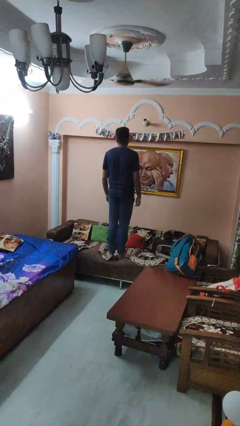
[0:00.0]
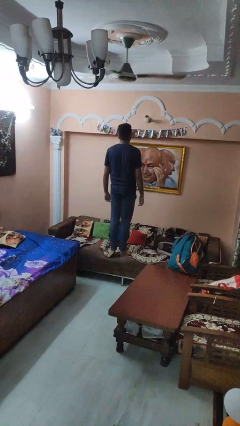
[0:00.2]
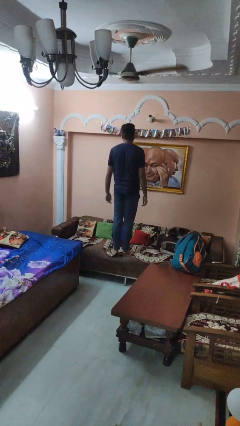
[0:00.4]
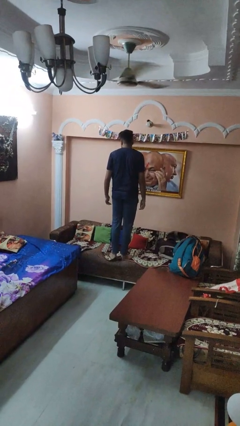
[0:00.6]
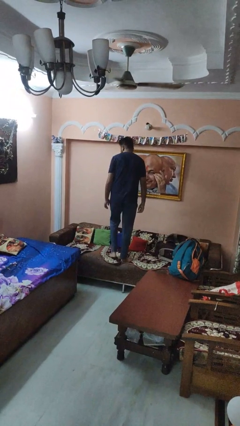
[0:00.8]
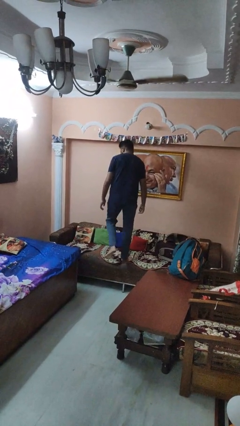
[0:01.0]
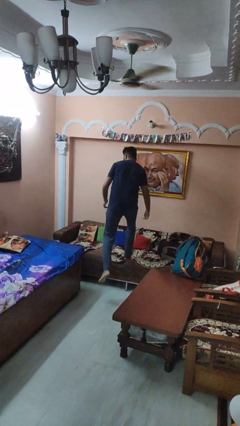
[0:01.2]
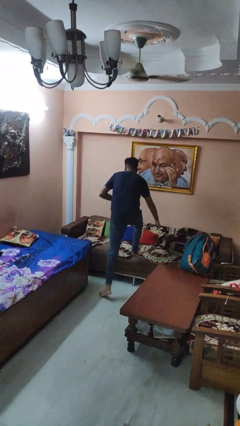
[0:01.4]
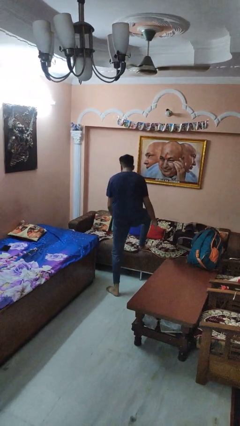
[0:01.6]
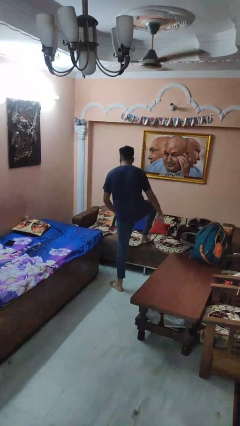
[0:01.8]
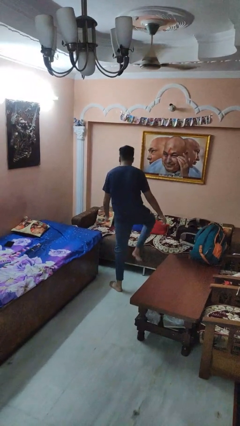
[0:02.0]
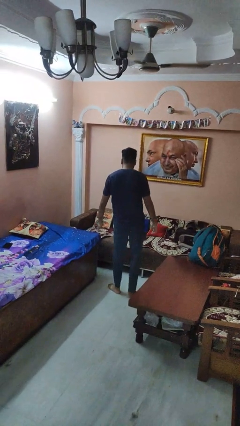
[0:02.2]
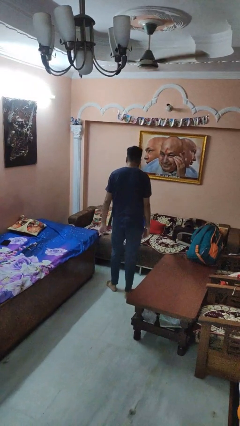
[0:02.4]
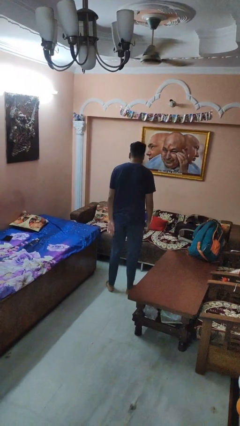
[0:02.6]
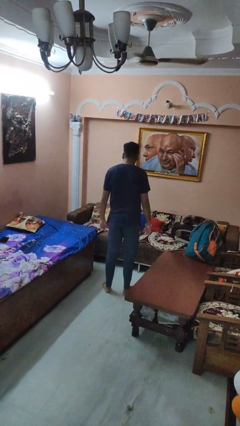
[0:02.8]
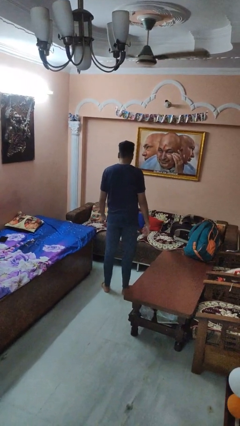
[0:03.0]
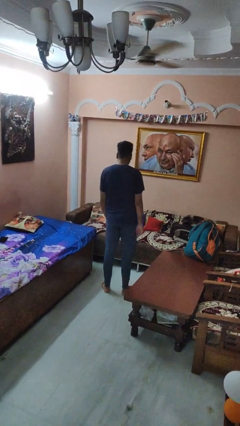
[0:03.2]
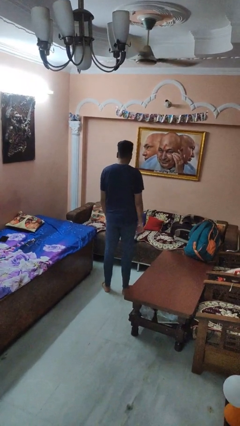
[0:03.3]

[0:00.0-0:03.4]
person climbs off couch

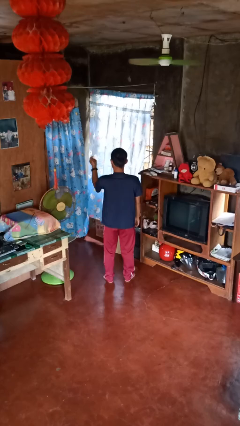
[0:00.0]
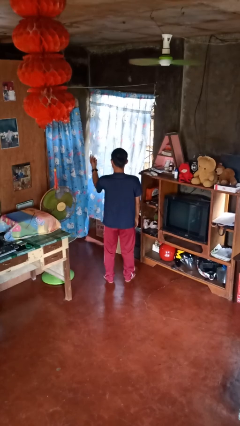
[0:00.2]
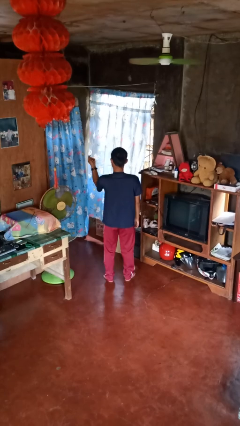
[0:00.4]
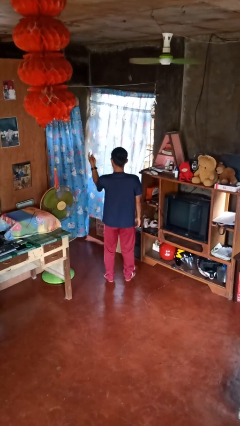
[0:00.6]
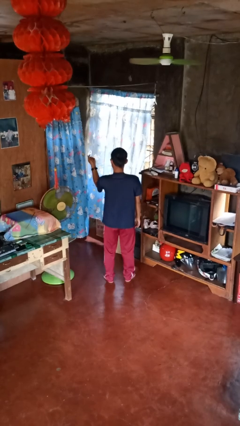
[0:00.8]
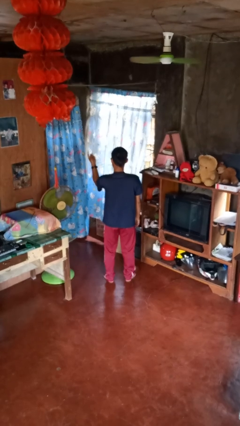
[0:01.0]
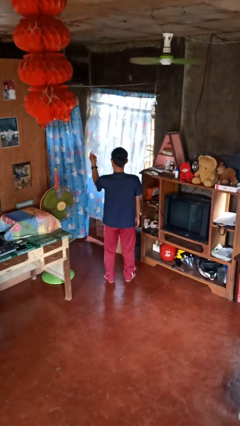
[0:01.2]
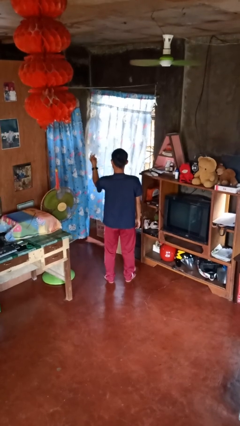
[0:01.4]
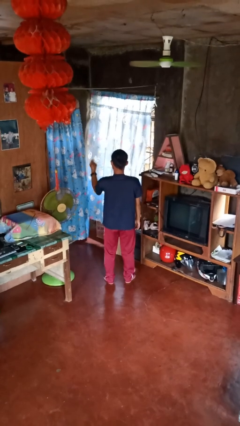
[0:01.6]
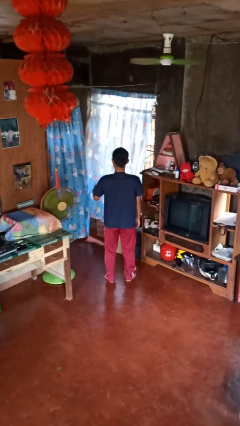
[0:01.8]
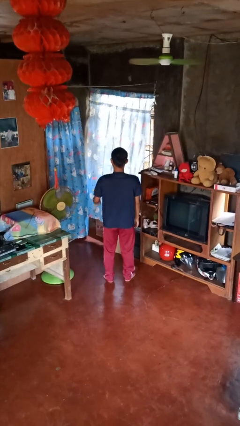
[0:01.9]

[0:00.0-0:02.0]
person snaps fingers

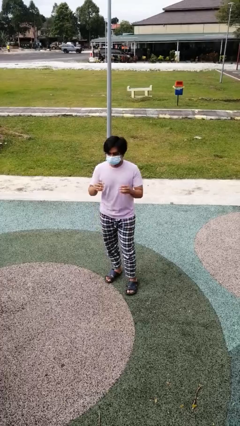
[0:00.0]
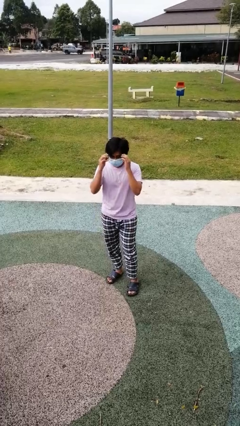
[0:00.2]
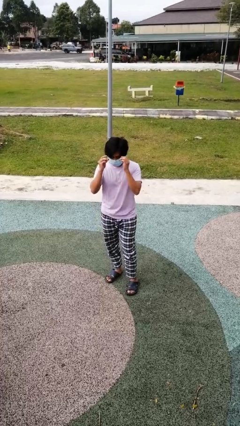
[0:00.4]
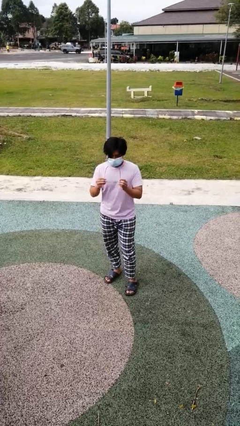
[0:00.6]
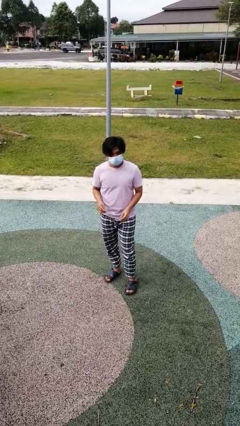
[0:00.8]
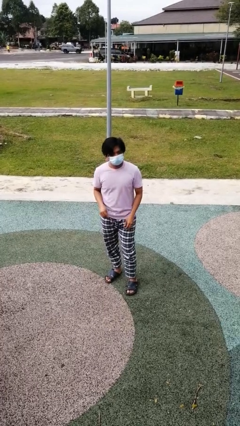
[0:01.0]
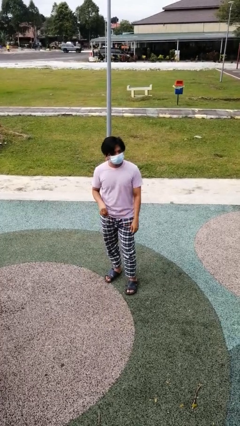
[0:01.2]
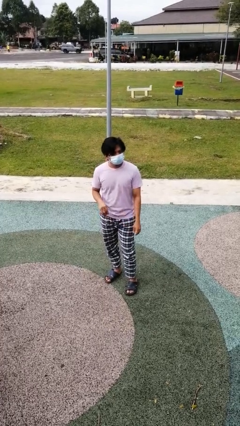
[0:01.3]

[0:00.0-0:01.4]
person takes off glasses

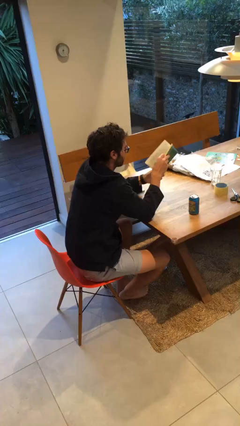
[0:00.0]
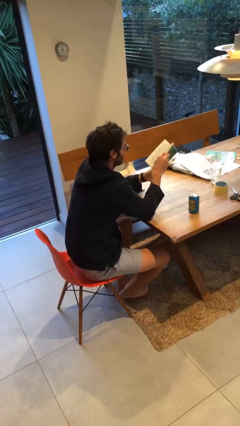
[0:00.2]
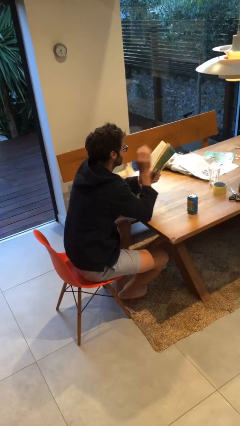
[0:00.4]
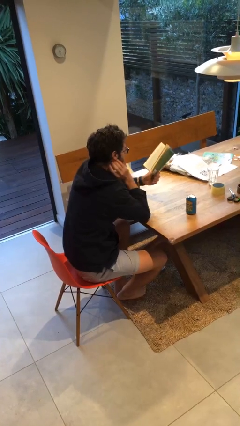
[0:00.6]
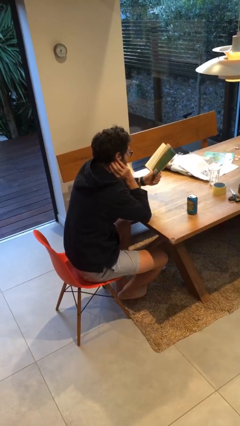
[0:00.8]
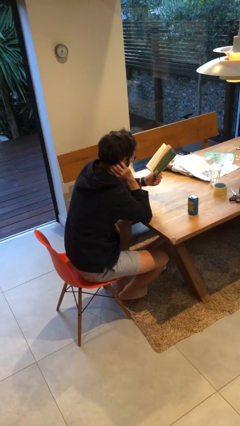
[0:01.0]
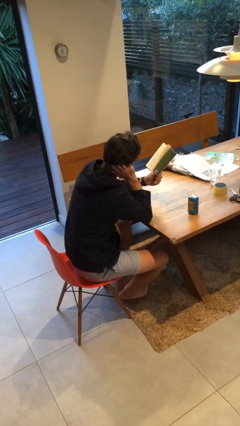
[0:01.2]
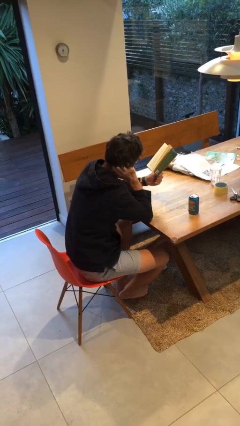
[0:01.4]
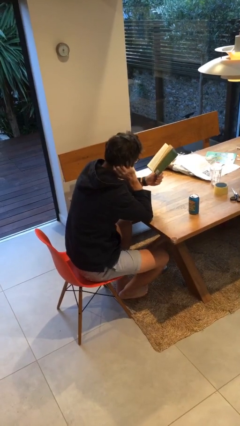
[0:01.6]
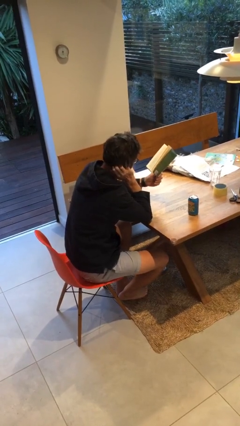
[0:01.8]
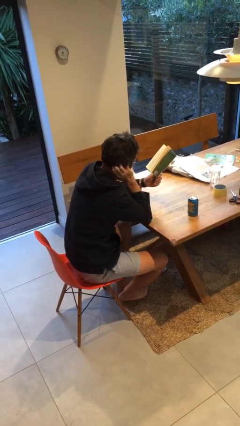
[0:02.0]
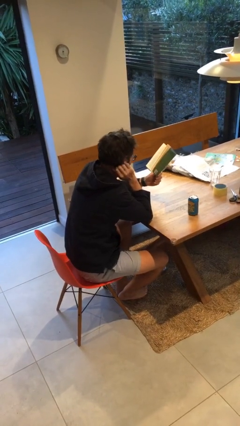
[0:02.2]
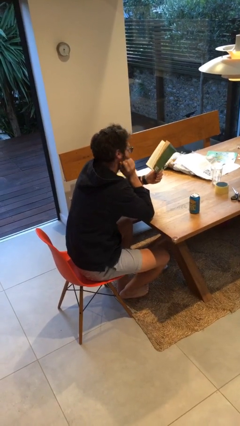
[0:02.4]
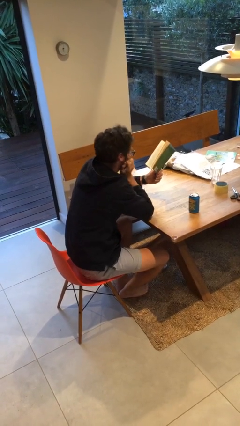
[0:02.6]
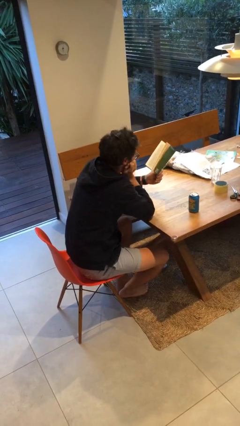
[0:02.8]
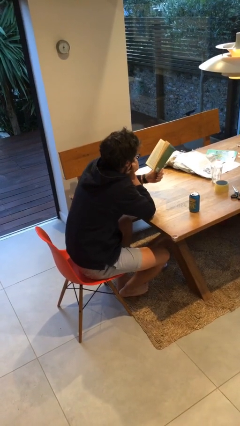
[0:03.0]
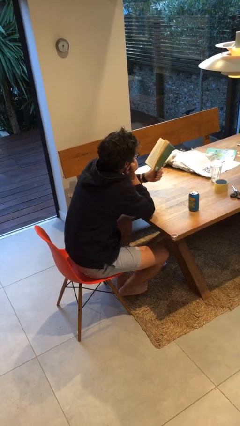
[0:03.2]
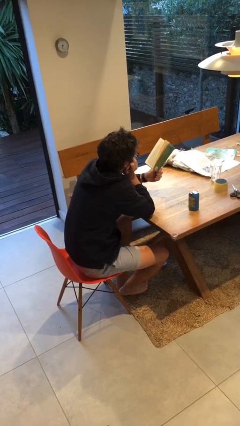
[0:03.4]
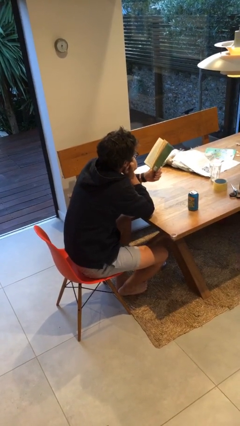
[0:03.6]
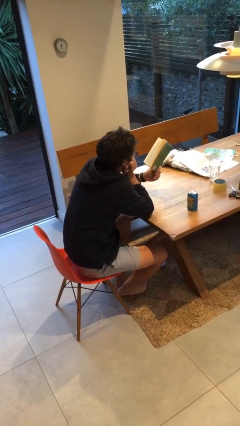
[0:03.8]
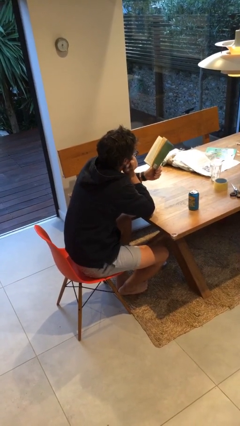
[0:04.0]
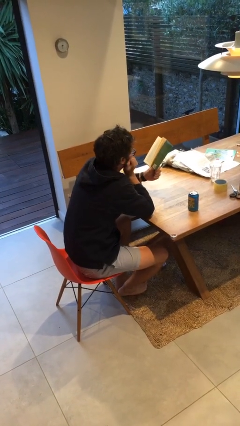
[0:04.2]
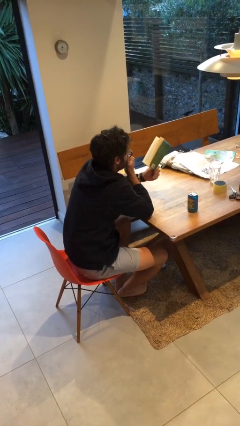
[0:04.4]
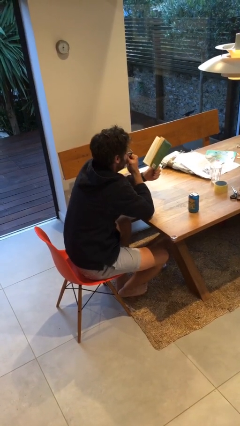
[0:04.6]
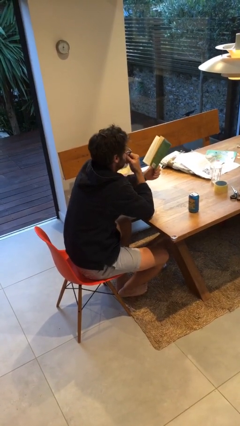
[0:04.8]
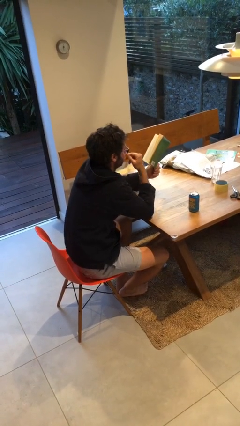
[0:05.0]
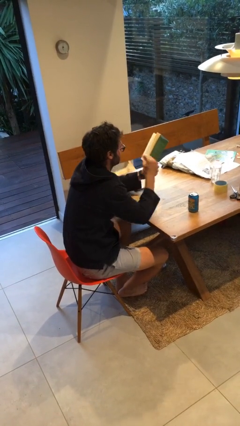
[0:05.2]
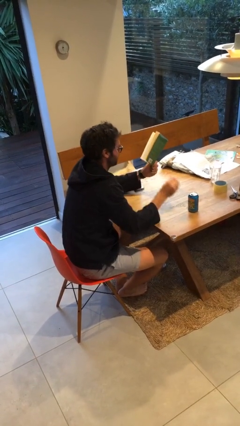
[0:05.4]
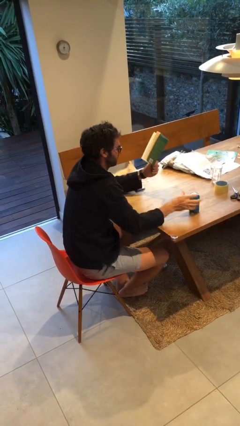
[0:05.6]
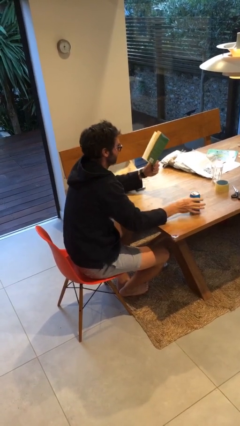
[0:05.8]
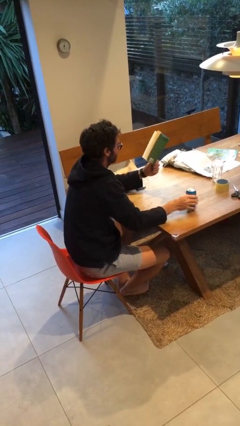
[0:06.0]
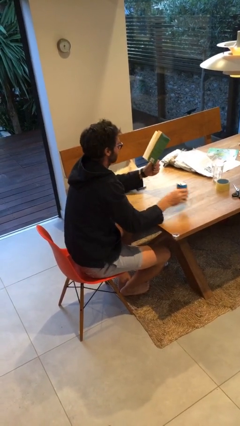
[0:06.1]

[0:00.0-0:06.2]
person reads document

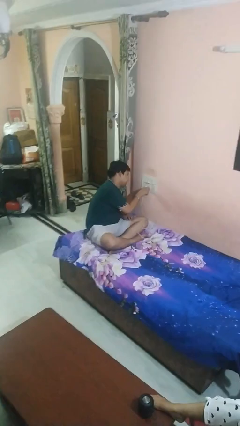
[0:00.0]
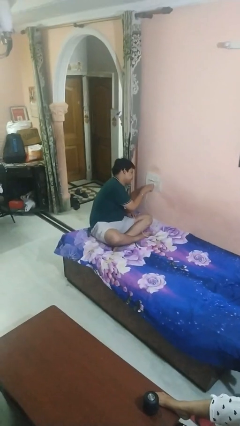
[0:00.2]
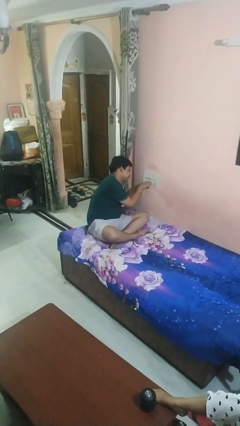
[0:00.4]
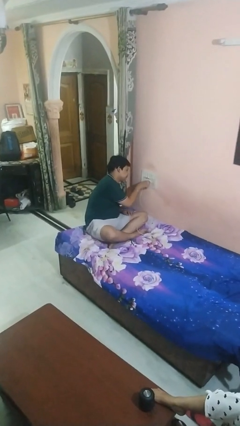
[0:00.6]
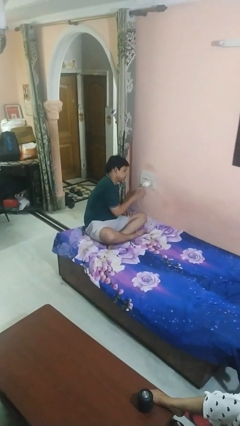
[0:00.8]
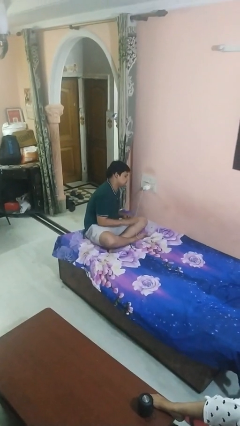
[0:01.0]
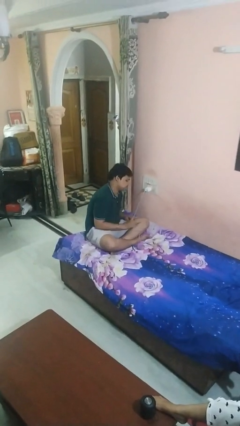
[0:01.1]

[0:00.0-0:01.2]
person plugs into electrical socket

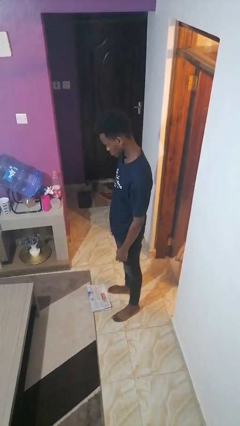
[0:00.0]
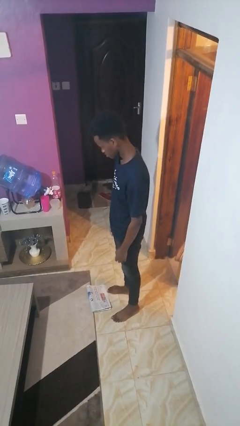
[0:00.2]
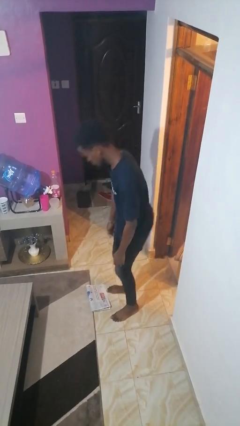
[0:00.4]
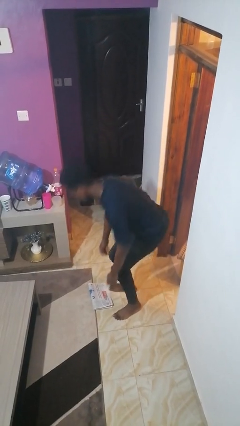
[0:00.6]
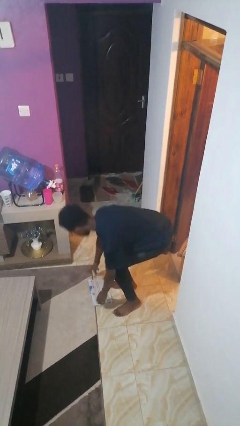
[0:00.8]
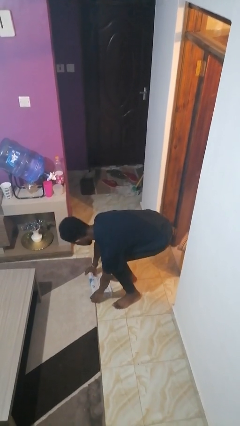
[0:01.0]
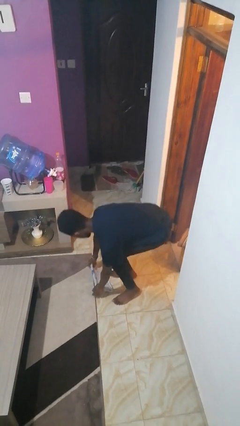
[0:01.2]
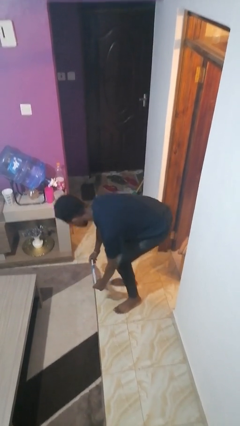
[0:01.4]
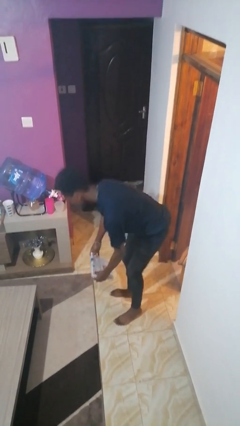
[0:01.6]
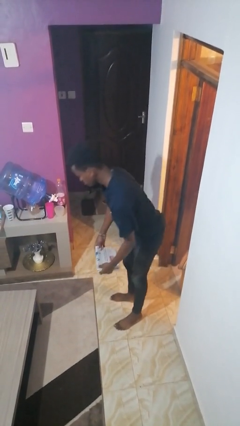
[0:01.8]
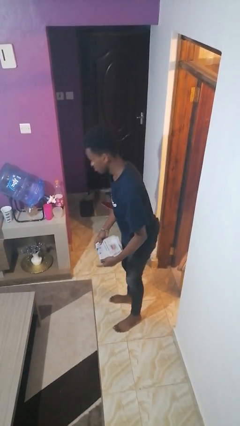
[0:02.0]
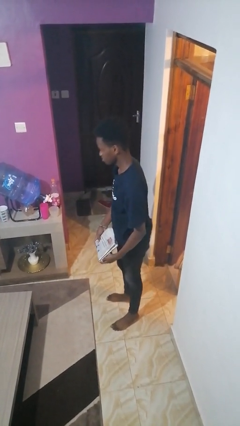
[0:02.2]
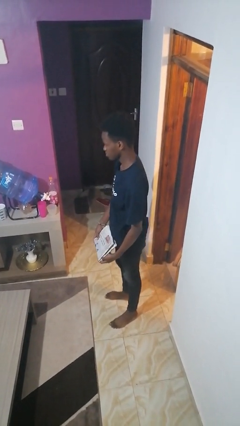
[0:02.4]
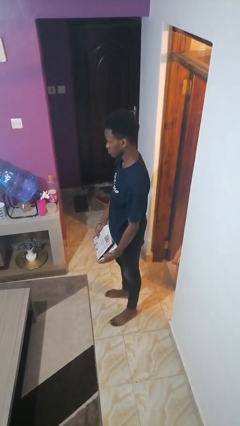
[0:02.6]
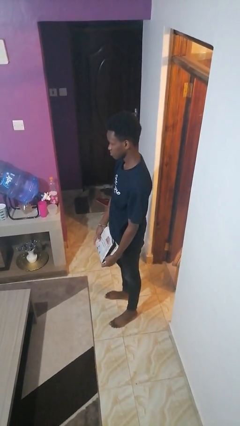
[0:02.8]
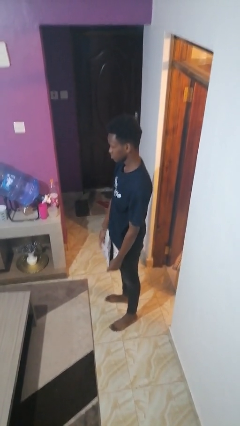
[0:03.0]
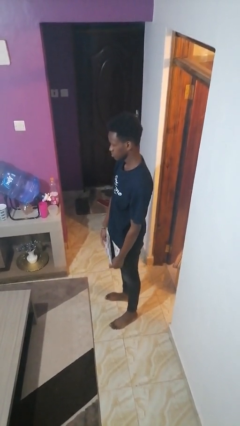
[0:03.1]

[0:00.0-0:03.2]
person picks up object from floor
